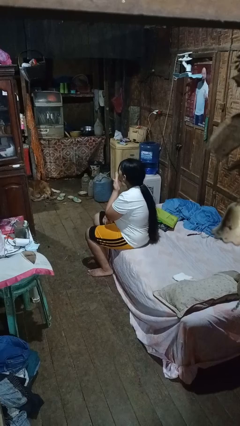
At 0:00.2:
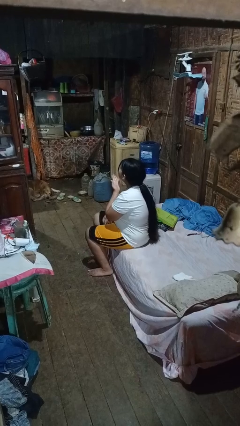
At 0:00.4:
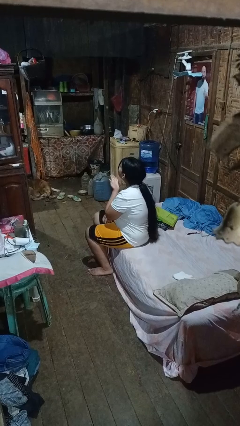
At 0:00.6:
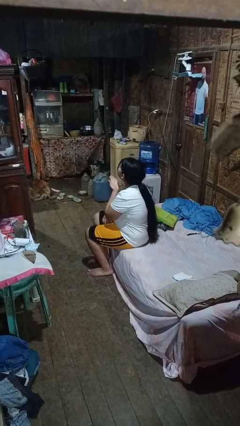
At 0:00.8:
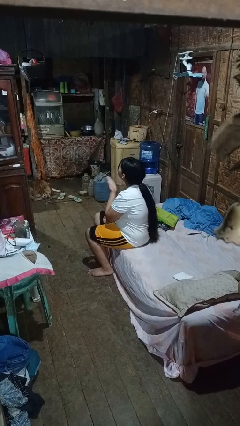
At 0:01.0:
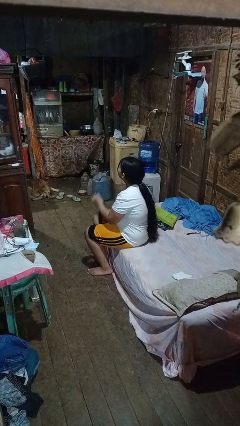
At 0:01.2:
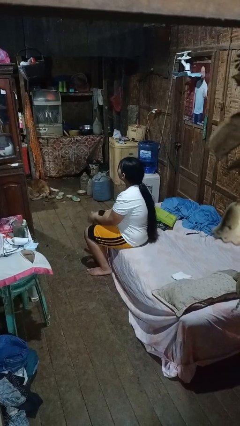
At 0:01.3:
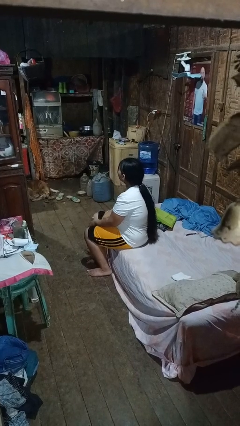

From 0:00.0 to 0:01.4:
person gestures blow kiss

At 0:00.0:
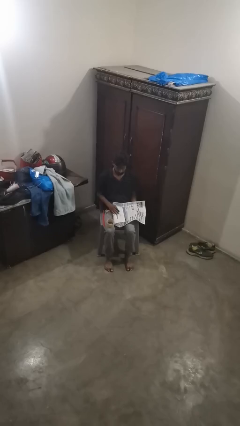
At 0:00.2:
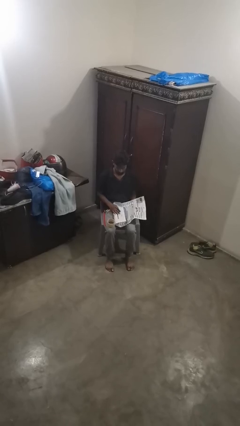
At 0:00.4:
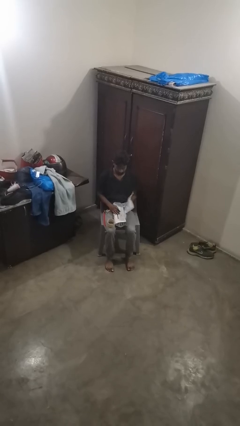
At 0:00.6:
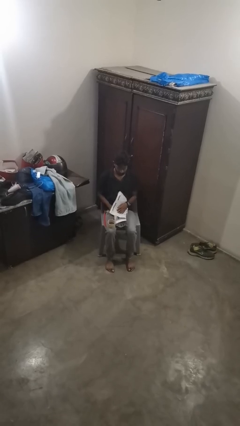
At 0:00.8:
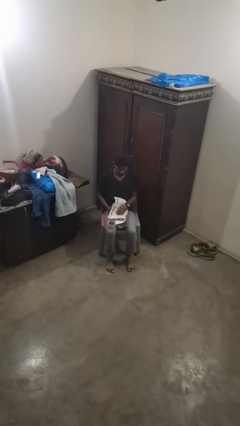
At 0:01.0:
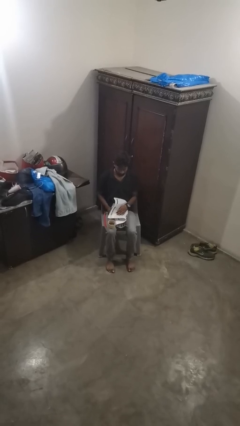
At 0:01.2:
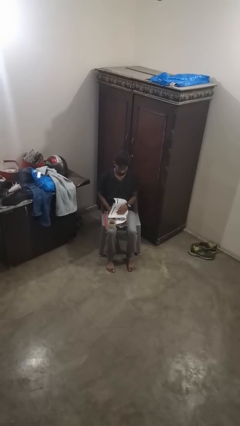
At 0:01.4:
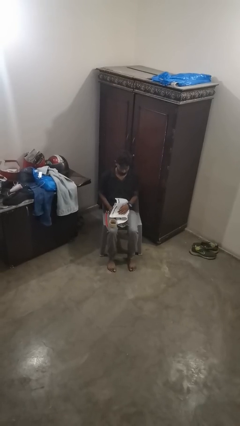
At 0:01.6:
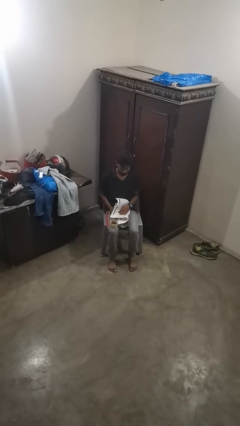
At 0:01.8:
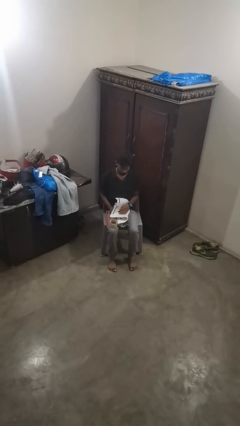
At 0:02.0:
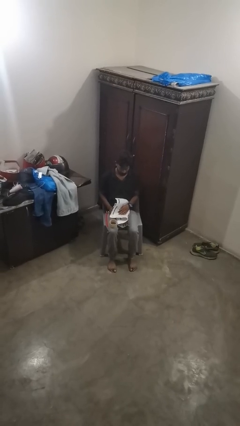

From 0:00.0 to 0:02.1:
person wraps box

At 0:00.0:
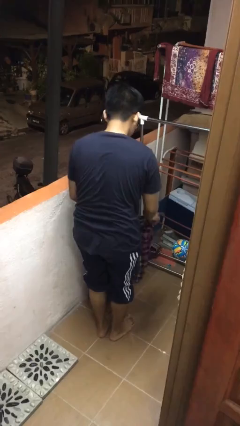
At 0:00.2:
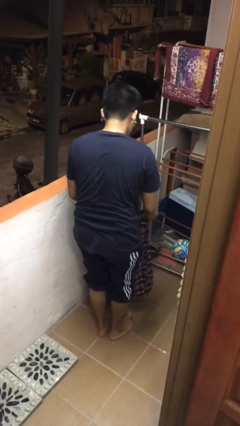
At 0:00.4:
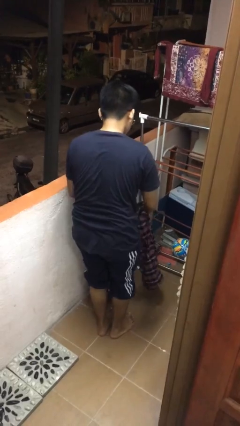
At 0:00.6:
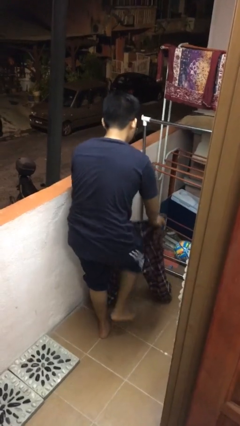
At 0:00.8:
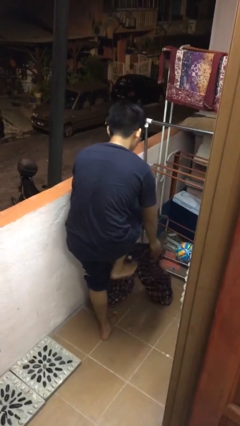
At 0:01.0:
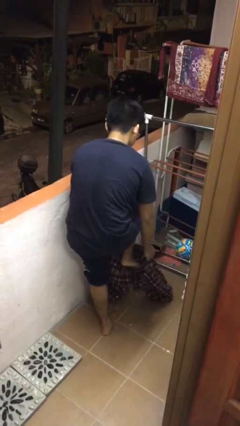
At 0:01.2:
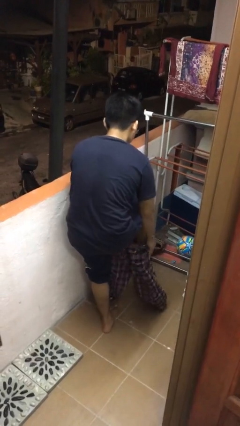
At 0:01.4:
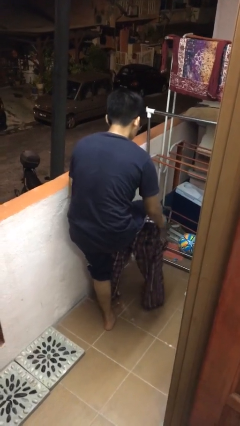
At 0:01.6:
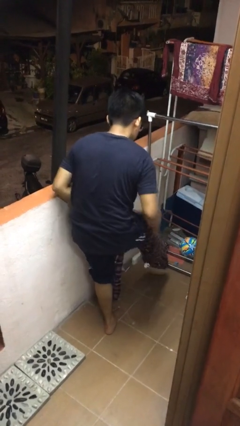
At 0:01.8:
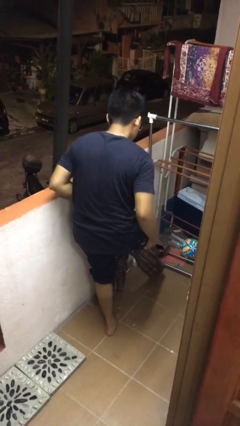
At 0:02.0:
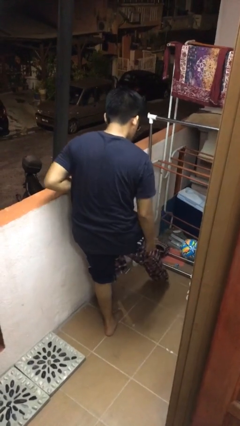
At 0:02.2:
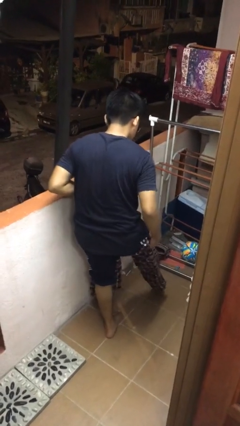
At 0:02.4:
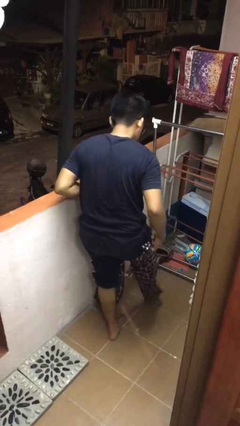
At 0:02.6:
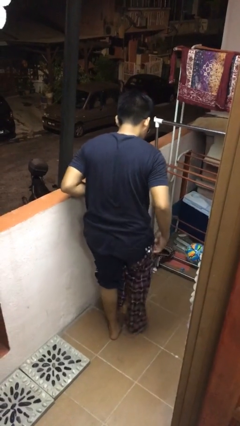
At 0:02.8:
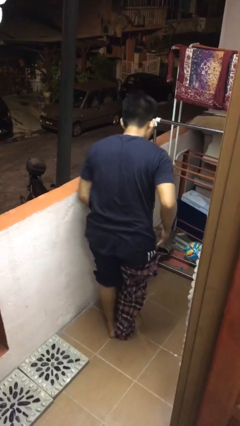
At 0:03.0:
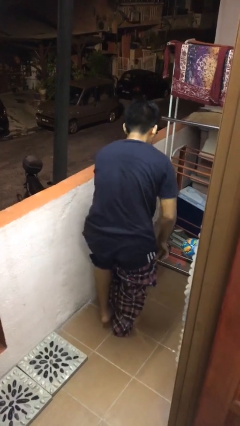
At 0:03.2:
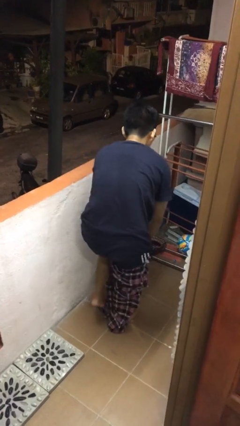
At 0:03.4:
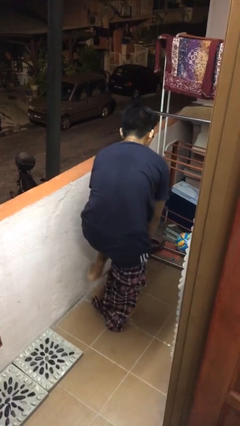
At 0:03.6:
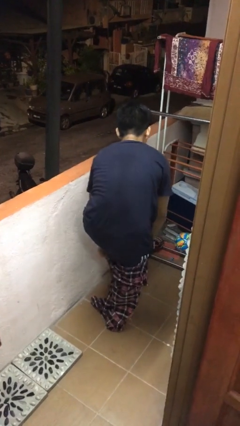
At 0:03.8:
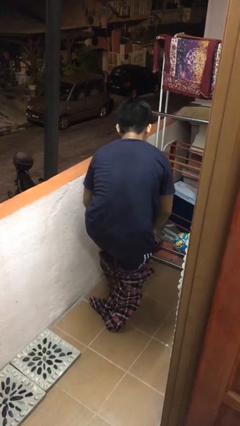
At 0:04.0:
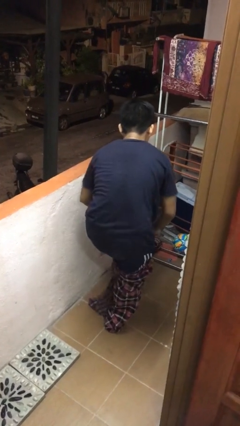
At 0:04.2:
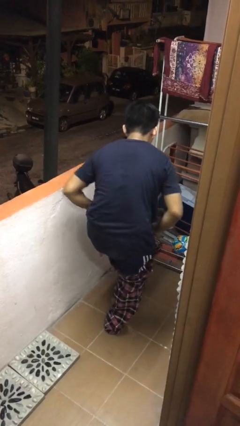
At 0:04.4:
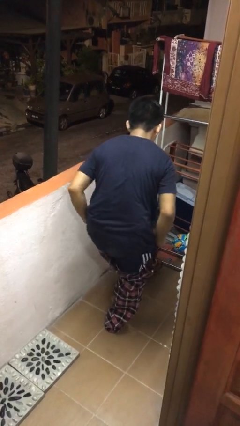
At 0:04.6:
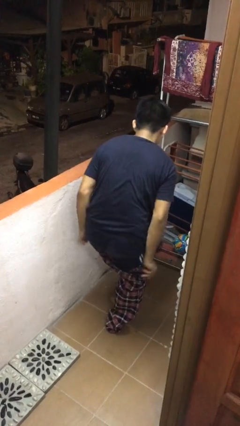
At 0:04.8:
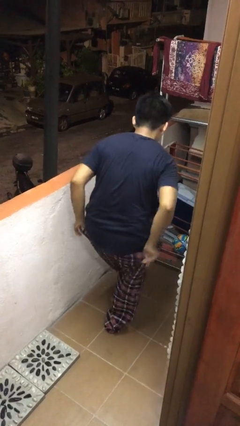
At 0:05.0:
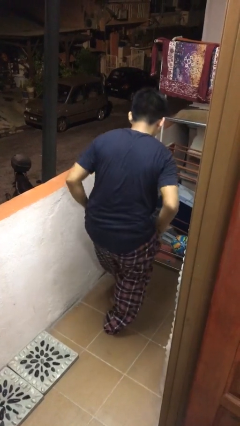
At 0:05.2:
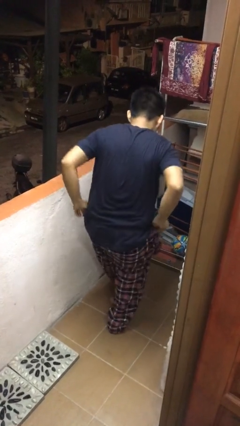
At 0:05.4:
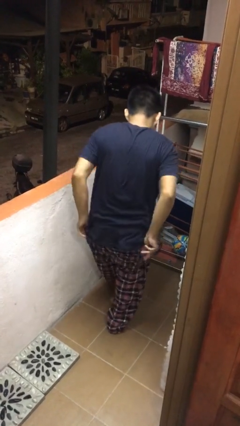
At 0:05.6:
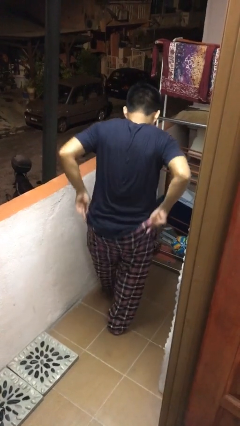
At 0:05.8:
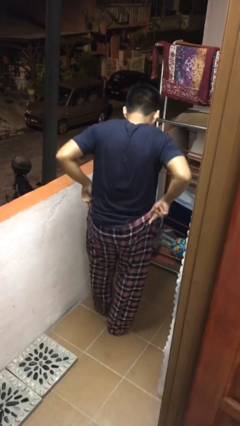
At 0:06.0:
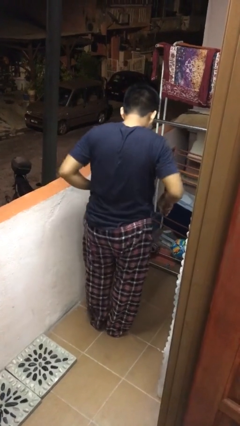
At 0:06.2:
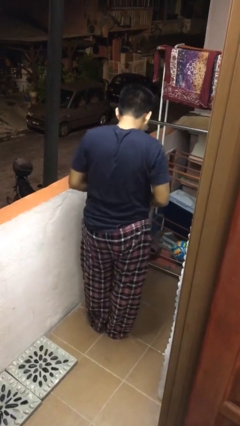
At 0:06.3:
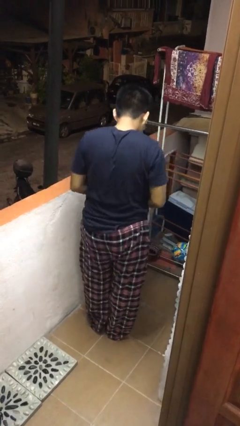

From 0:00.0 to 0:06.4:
person puts on pants

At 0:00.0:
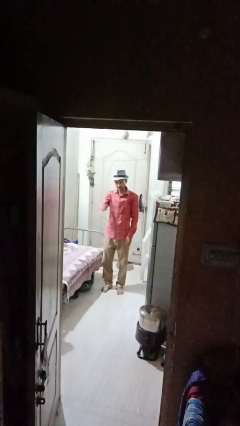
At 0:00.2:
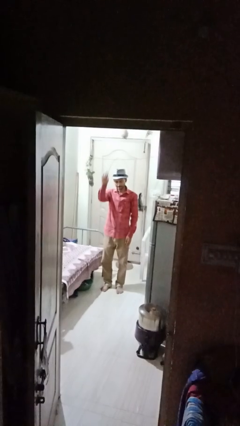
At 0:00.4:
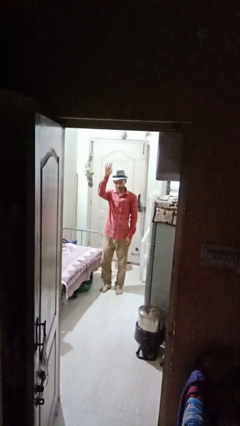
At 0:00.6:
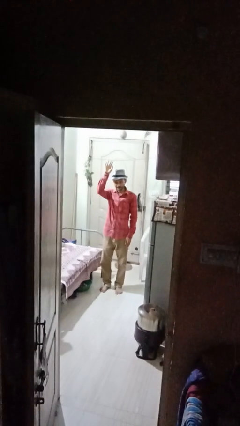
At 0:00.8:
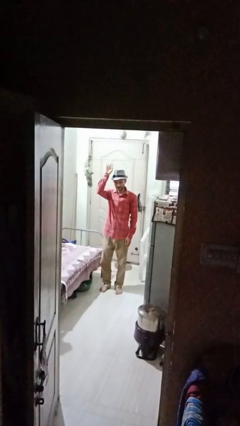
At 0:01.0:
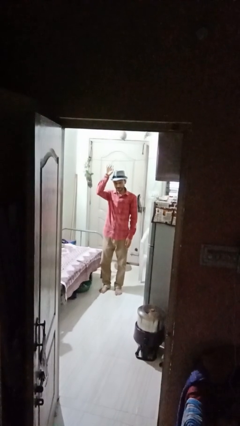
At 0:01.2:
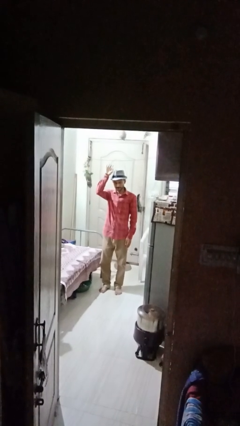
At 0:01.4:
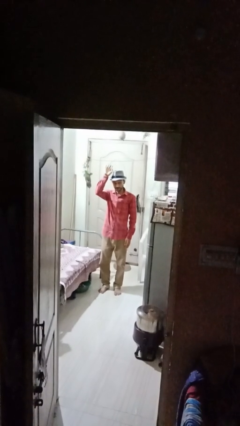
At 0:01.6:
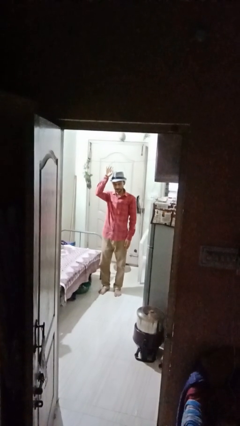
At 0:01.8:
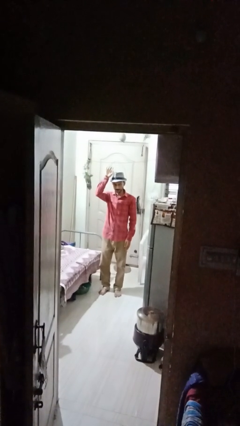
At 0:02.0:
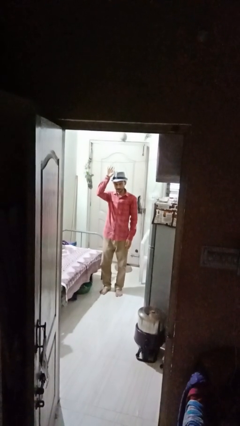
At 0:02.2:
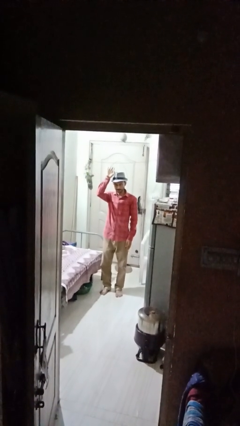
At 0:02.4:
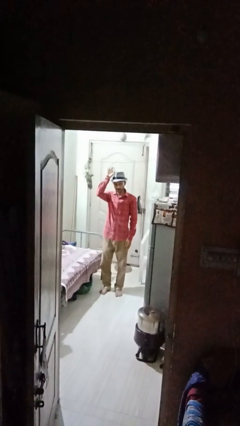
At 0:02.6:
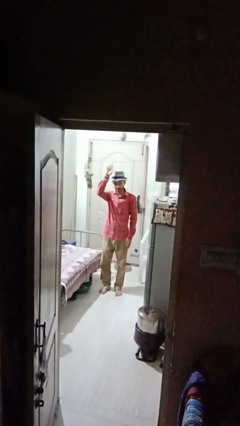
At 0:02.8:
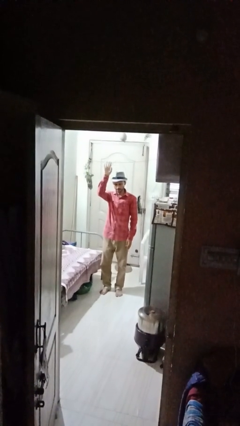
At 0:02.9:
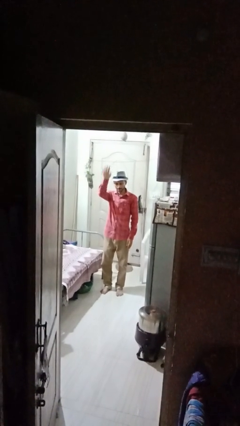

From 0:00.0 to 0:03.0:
person gestures raise hand

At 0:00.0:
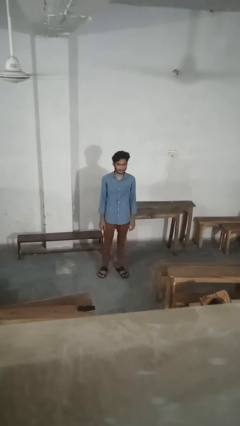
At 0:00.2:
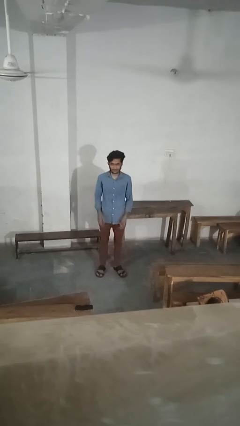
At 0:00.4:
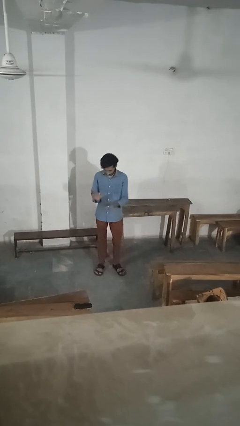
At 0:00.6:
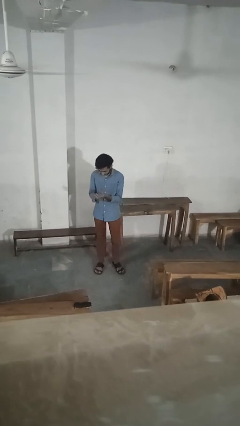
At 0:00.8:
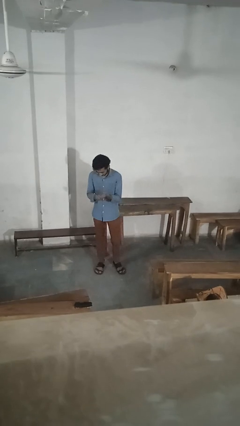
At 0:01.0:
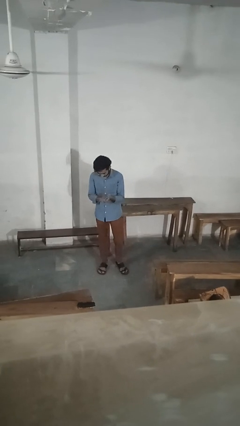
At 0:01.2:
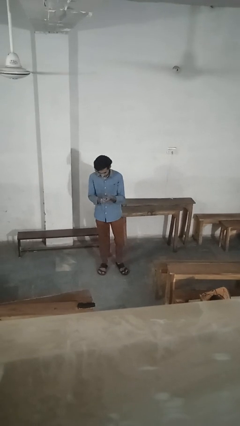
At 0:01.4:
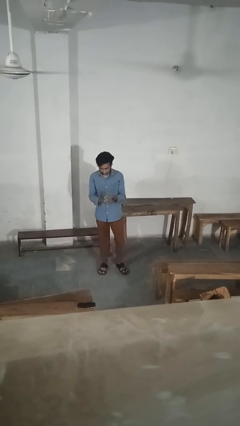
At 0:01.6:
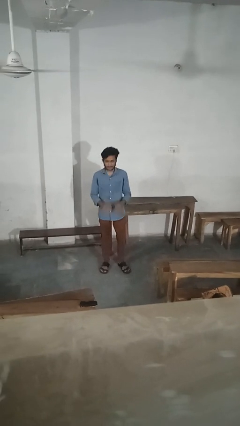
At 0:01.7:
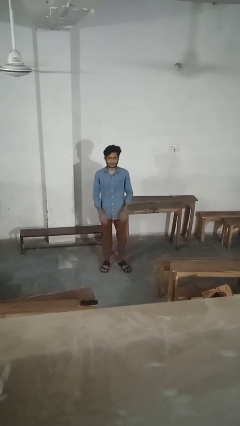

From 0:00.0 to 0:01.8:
person claps hands

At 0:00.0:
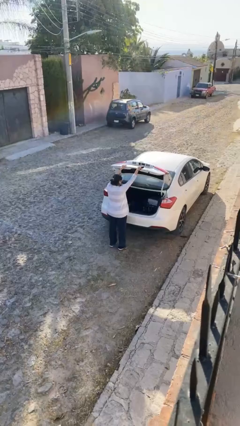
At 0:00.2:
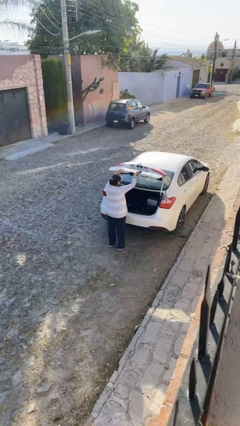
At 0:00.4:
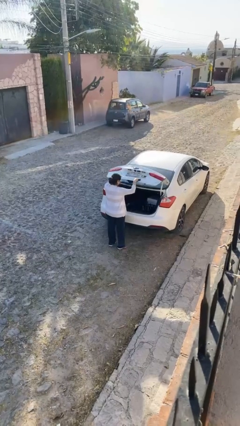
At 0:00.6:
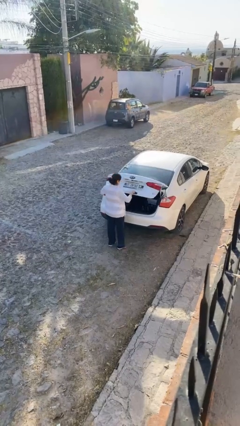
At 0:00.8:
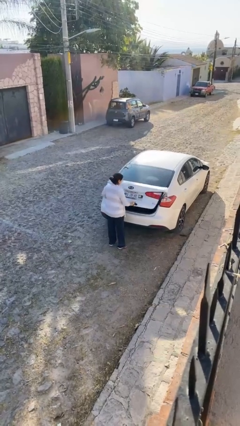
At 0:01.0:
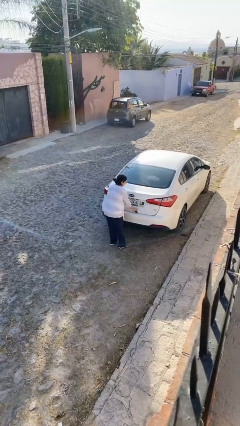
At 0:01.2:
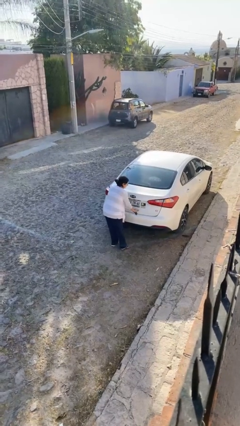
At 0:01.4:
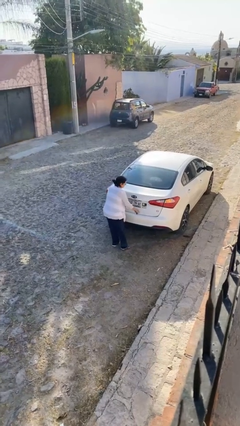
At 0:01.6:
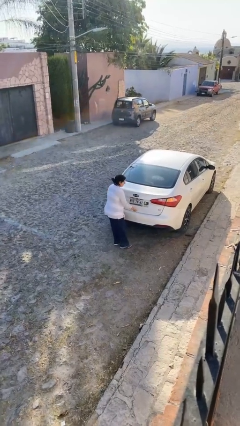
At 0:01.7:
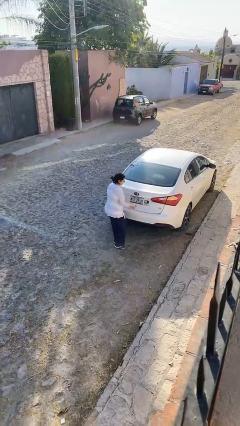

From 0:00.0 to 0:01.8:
person closes car trunk

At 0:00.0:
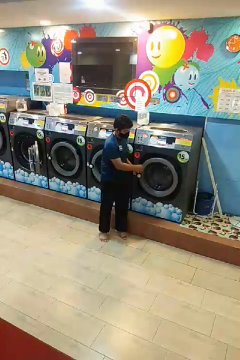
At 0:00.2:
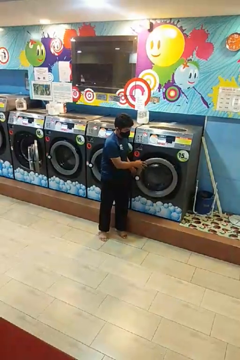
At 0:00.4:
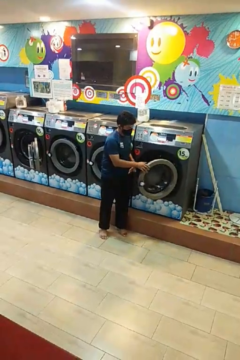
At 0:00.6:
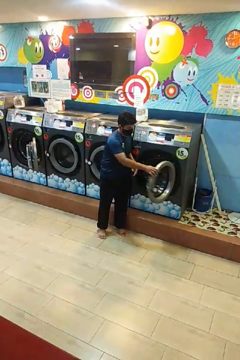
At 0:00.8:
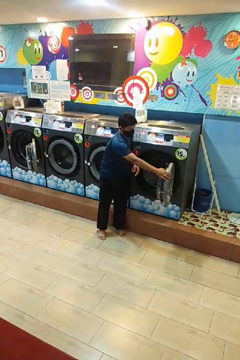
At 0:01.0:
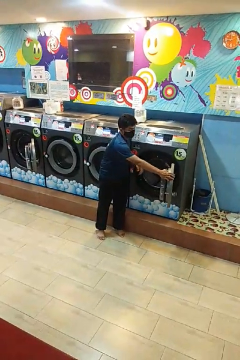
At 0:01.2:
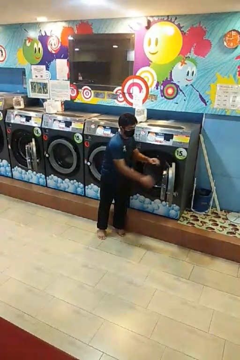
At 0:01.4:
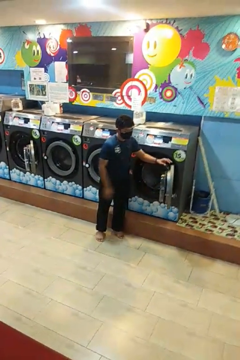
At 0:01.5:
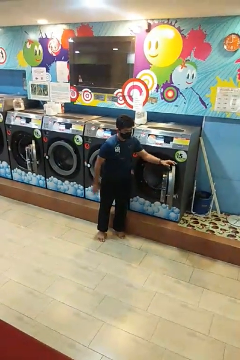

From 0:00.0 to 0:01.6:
person opens clothes washer
